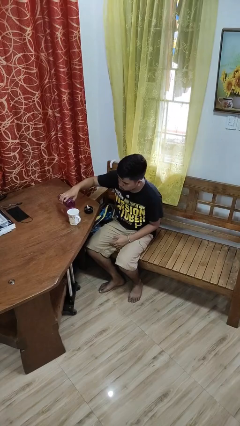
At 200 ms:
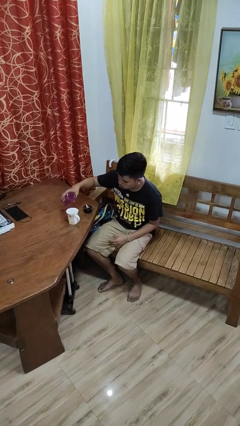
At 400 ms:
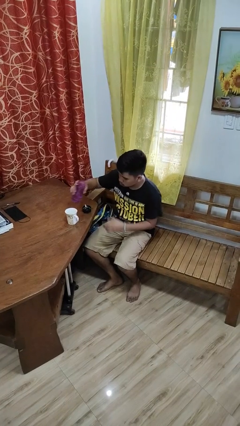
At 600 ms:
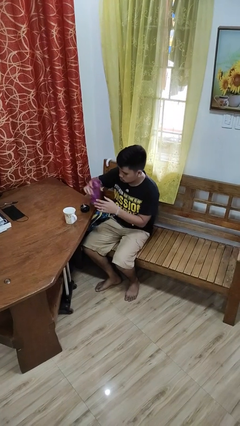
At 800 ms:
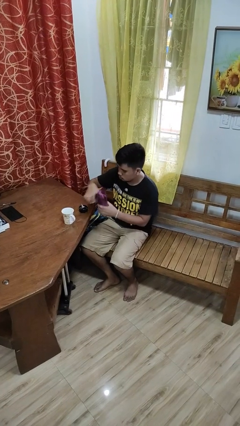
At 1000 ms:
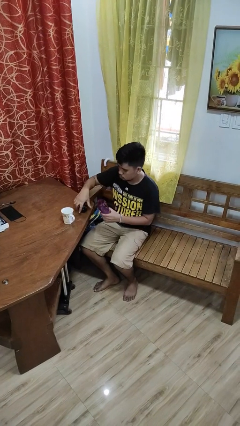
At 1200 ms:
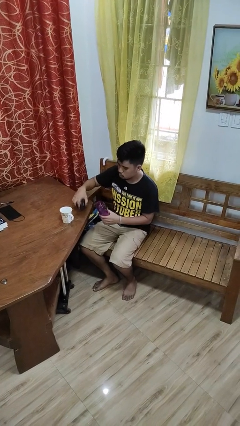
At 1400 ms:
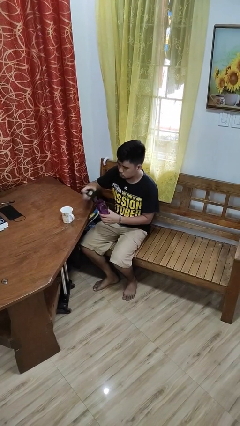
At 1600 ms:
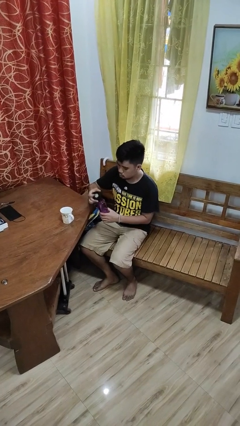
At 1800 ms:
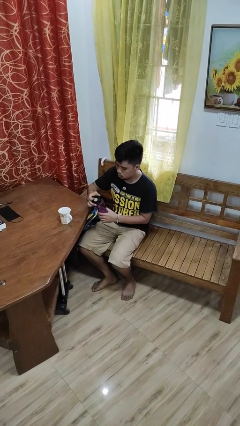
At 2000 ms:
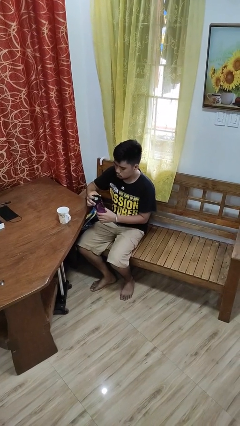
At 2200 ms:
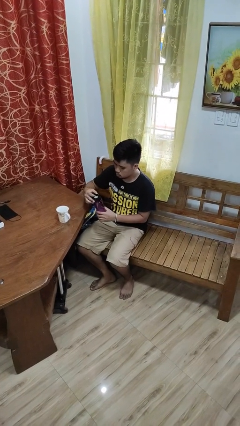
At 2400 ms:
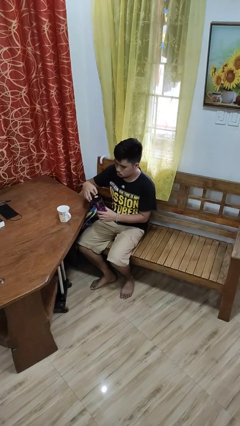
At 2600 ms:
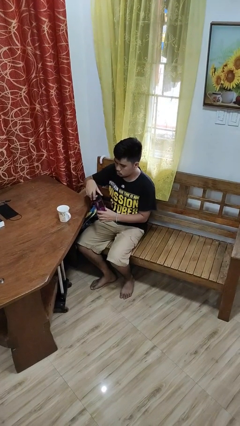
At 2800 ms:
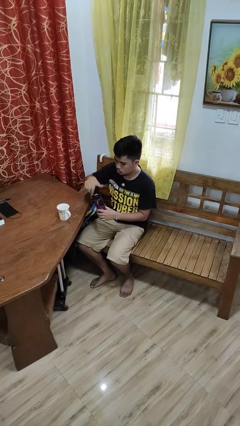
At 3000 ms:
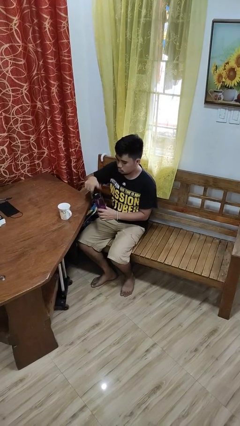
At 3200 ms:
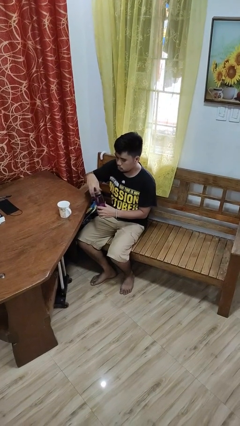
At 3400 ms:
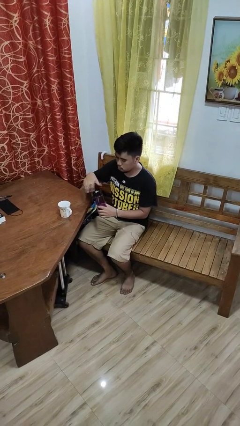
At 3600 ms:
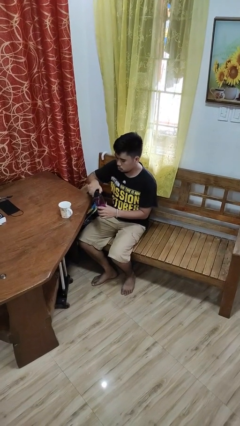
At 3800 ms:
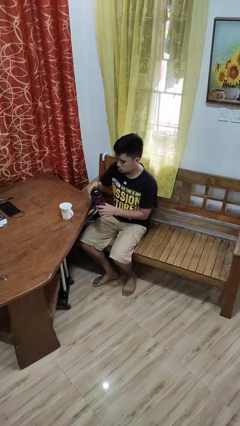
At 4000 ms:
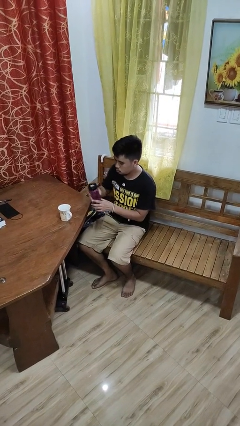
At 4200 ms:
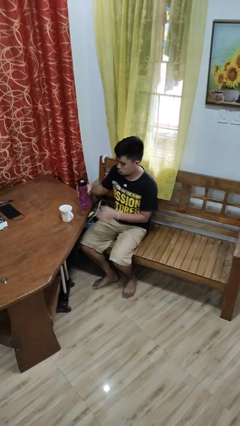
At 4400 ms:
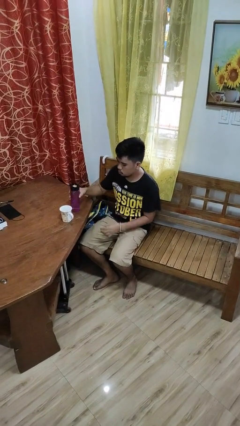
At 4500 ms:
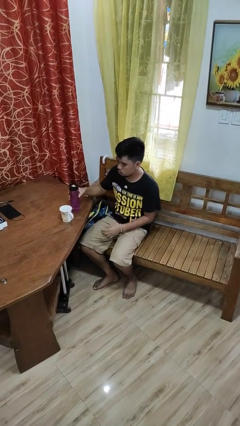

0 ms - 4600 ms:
person screws lid to bottle

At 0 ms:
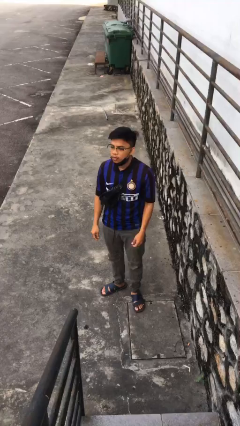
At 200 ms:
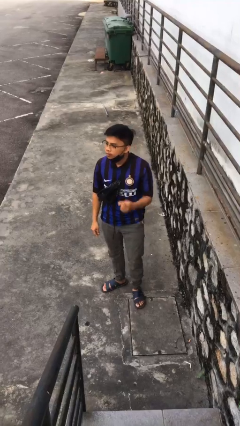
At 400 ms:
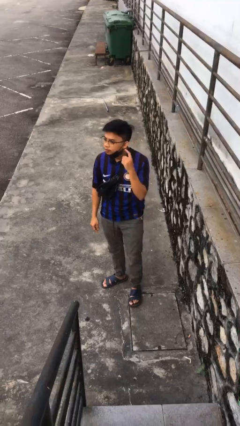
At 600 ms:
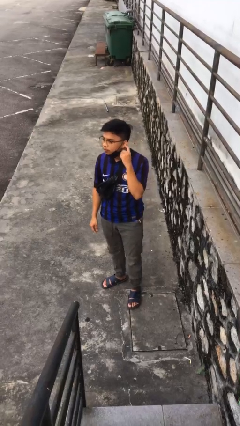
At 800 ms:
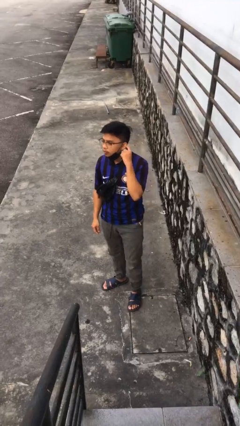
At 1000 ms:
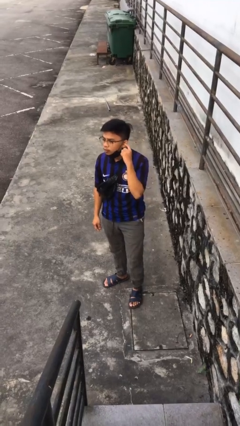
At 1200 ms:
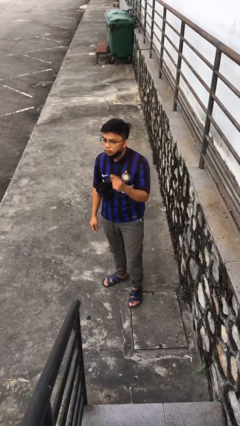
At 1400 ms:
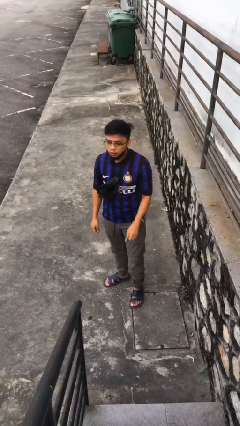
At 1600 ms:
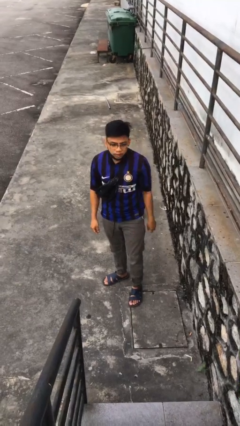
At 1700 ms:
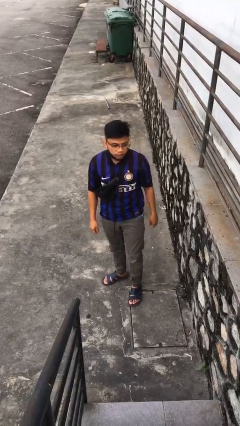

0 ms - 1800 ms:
person gestures listen closely

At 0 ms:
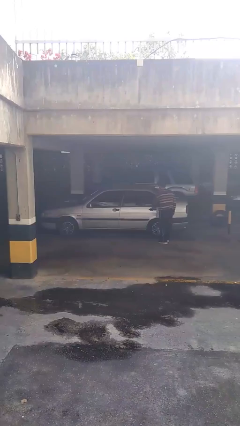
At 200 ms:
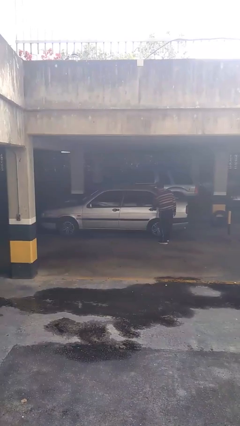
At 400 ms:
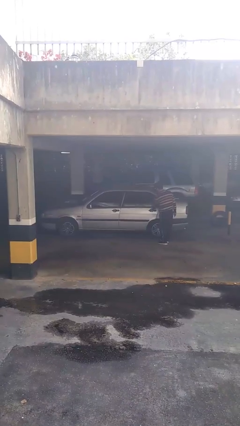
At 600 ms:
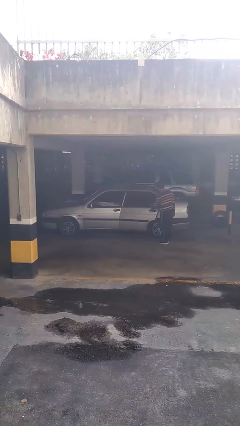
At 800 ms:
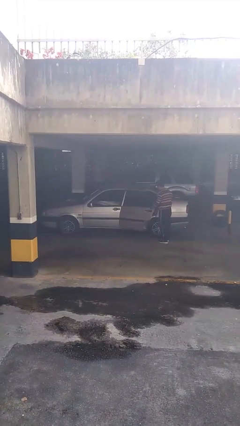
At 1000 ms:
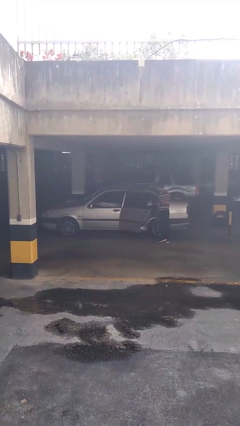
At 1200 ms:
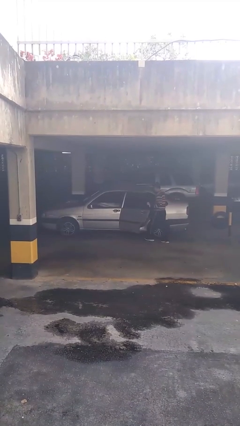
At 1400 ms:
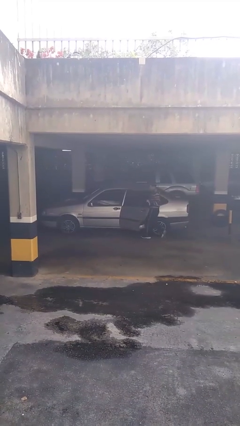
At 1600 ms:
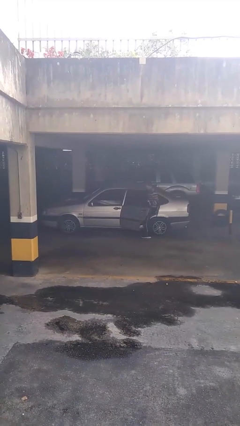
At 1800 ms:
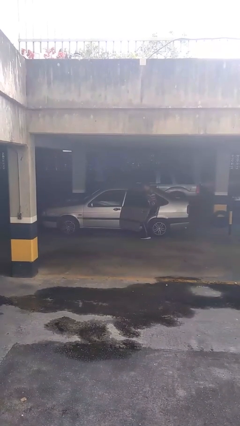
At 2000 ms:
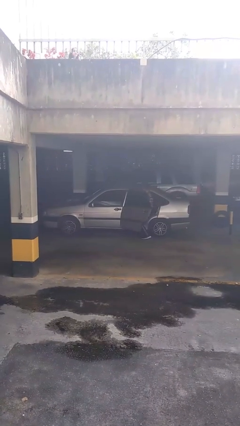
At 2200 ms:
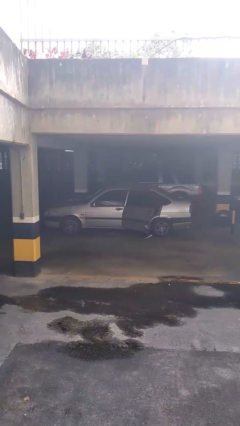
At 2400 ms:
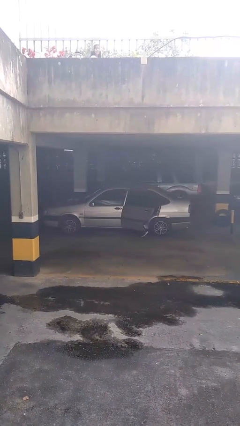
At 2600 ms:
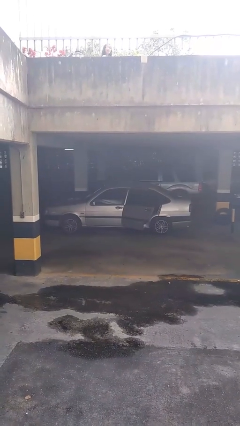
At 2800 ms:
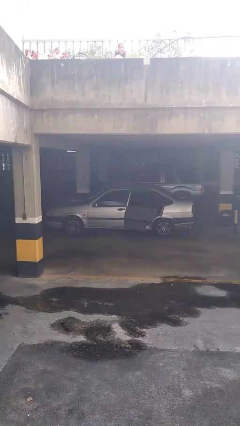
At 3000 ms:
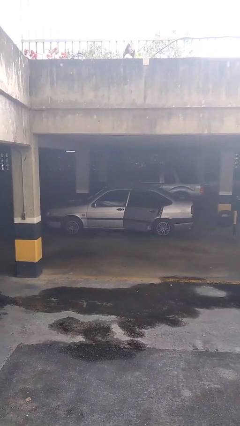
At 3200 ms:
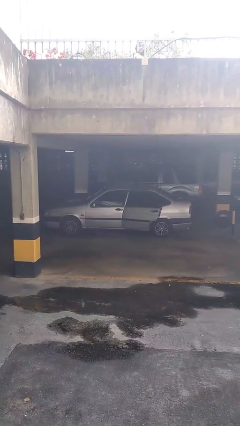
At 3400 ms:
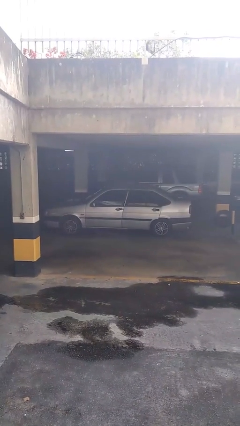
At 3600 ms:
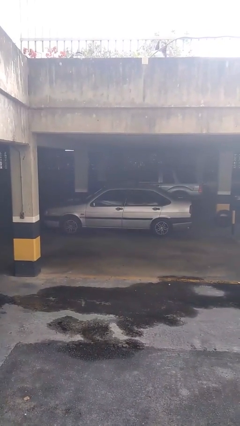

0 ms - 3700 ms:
car picks up person

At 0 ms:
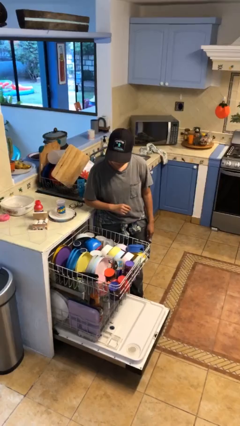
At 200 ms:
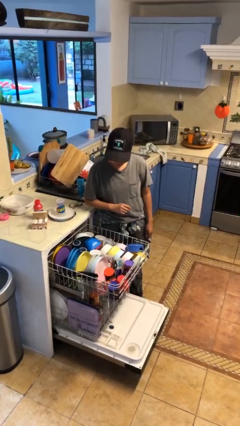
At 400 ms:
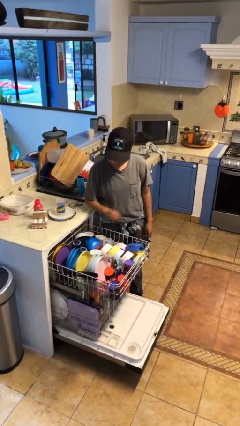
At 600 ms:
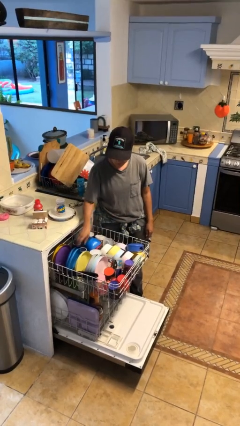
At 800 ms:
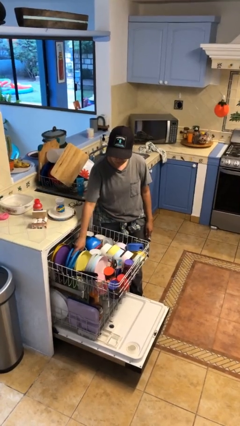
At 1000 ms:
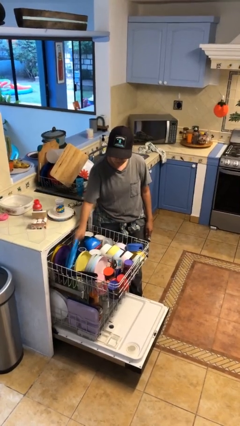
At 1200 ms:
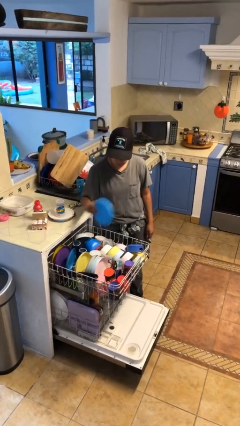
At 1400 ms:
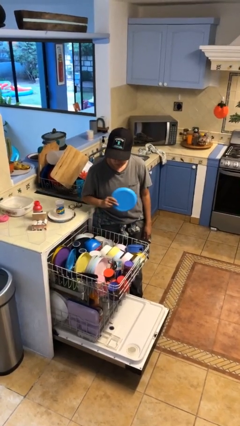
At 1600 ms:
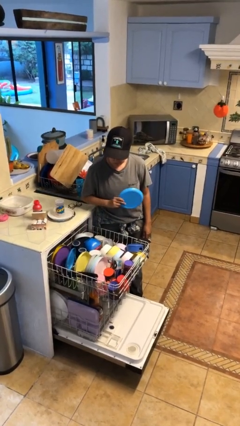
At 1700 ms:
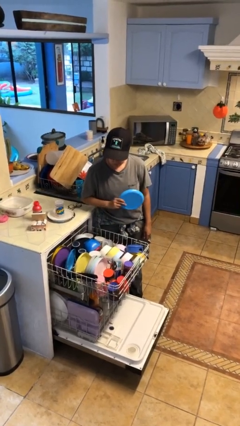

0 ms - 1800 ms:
person unloads dishwasher

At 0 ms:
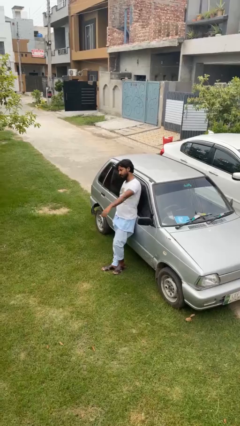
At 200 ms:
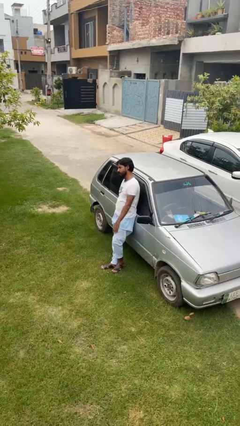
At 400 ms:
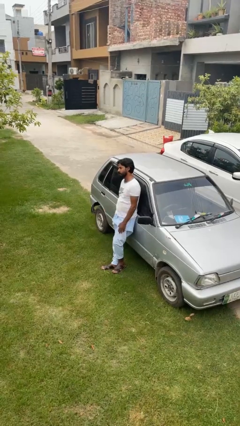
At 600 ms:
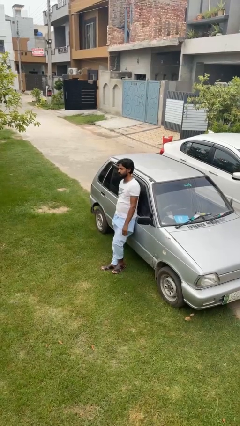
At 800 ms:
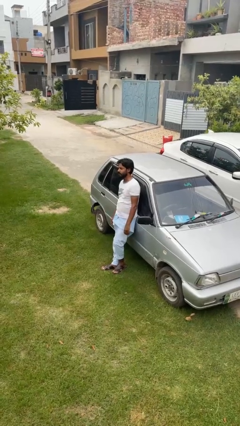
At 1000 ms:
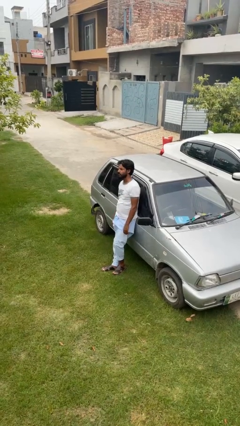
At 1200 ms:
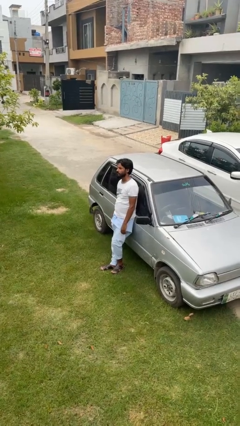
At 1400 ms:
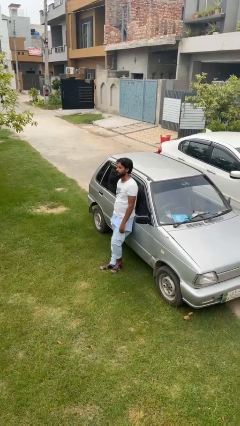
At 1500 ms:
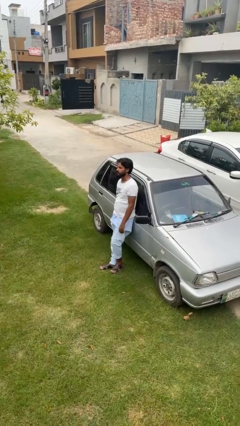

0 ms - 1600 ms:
person gestures lower hand

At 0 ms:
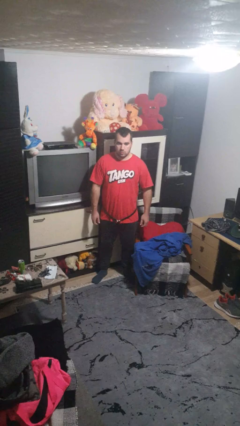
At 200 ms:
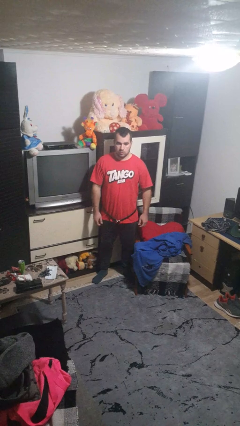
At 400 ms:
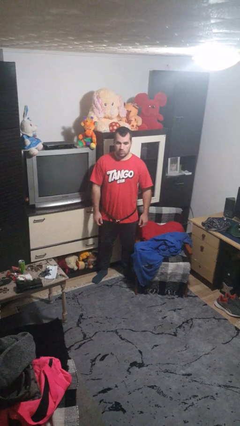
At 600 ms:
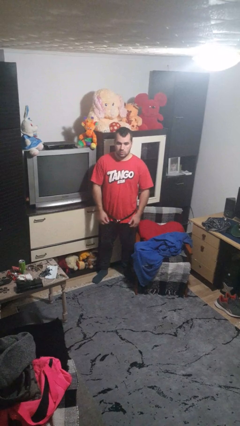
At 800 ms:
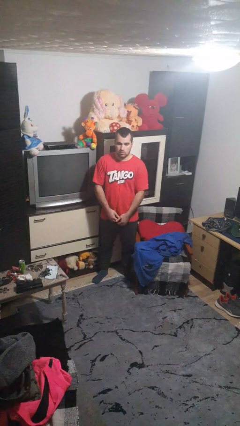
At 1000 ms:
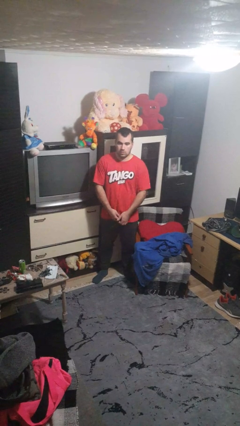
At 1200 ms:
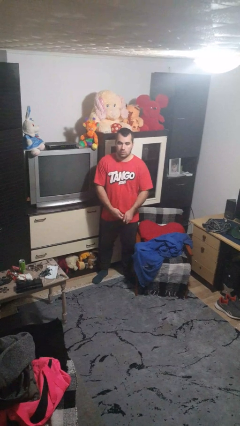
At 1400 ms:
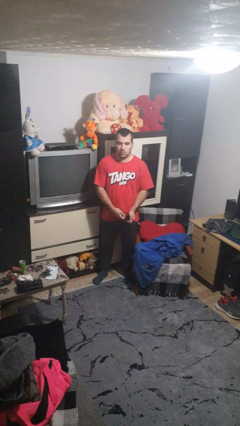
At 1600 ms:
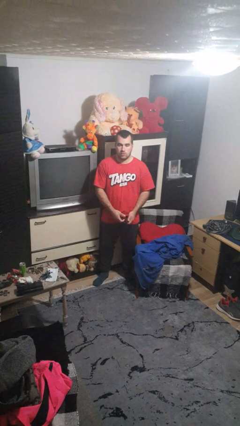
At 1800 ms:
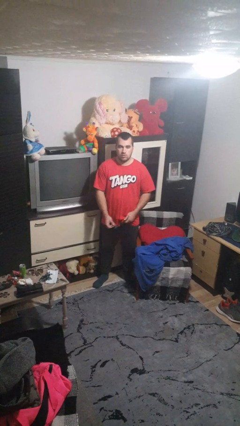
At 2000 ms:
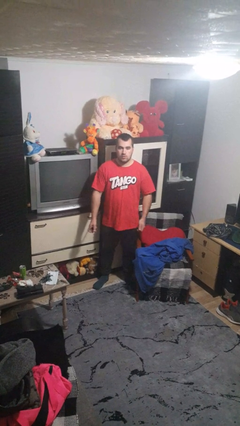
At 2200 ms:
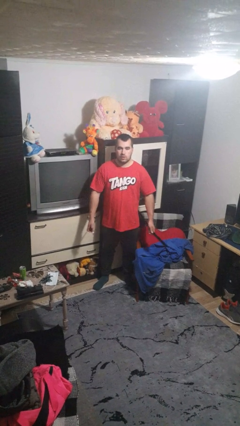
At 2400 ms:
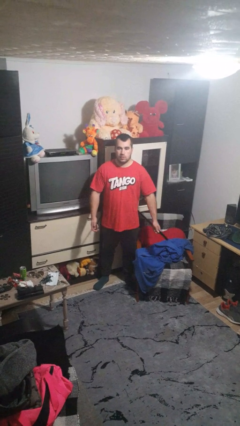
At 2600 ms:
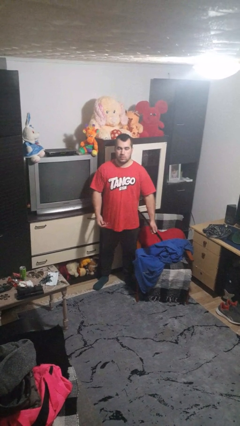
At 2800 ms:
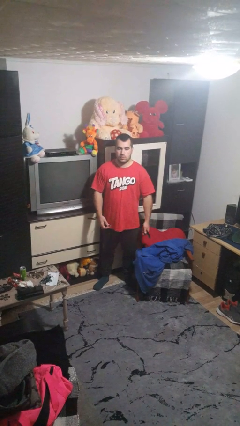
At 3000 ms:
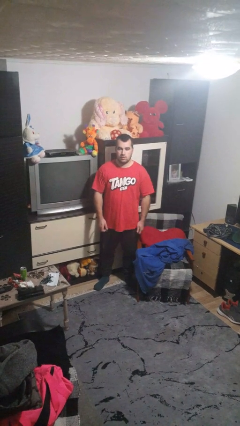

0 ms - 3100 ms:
person takes off belt

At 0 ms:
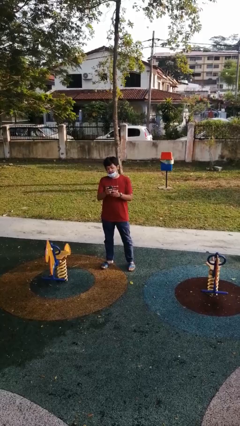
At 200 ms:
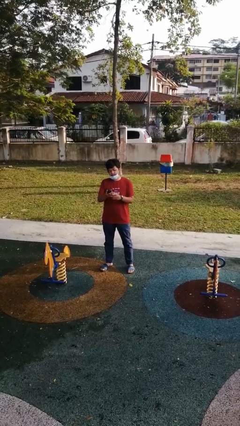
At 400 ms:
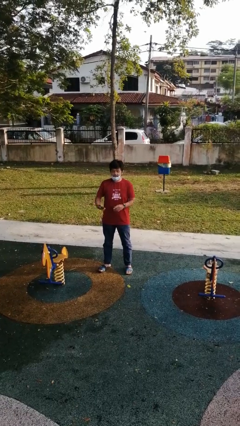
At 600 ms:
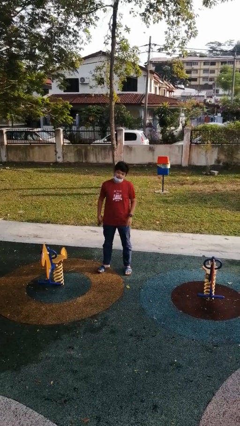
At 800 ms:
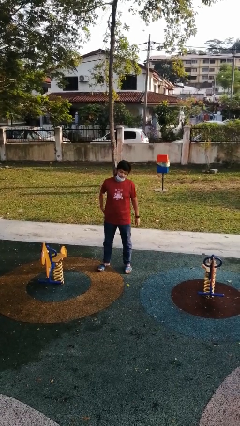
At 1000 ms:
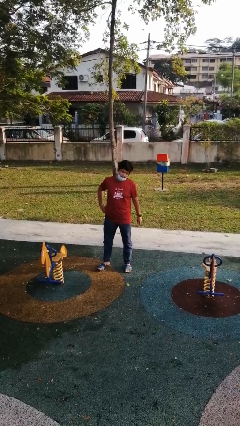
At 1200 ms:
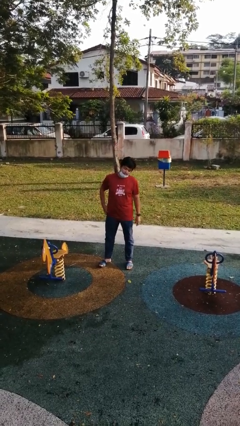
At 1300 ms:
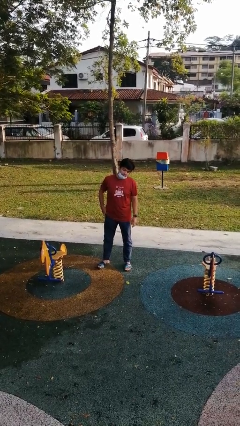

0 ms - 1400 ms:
person puts phone into pocket
